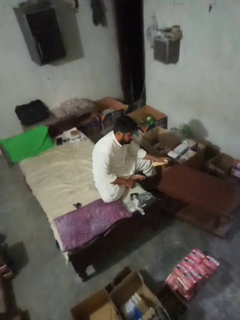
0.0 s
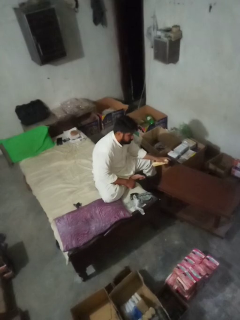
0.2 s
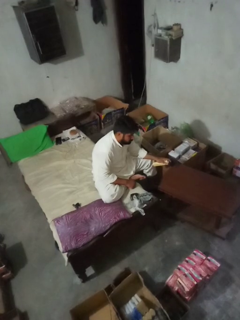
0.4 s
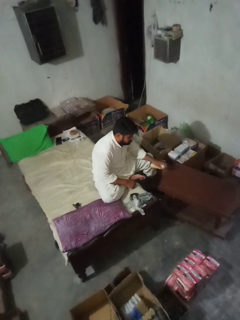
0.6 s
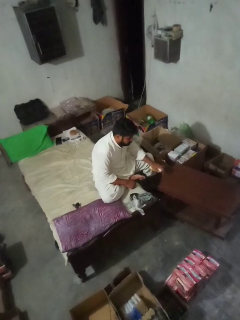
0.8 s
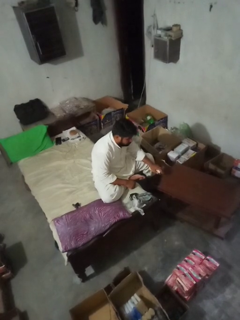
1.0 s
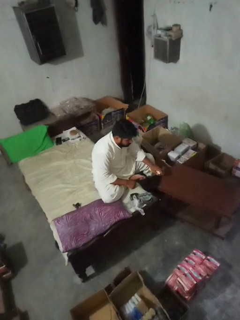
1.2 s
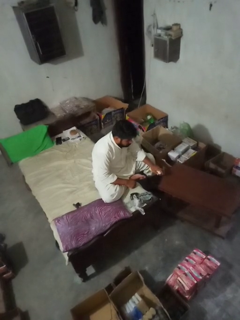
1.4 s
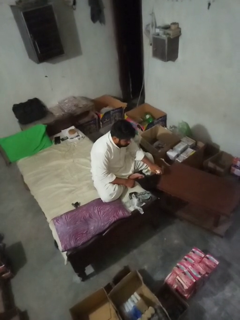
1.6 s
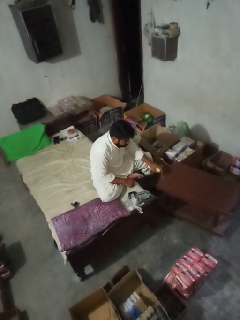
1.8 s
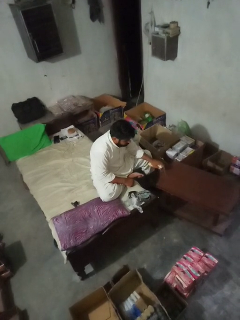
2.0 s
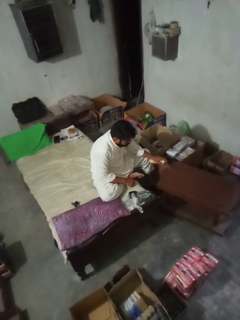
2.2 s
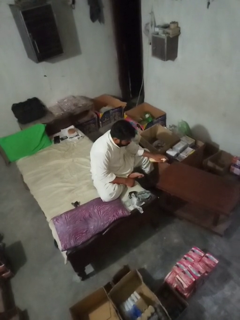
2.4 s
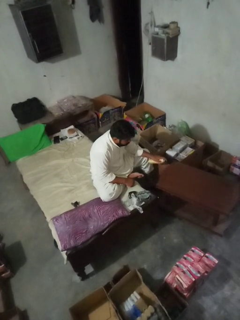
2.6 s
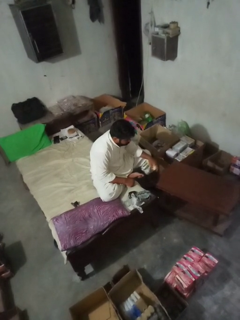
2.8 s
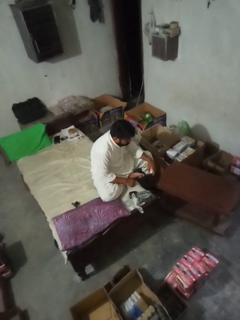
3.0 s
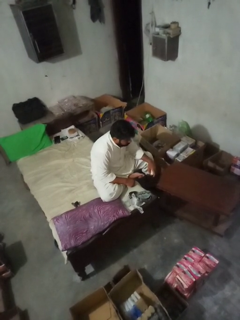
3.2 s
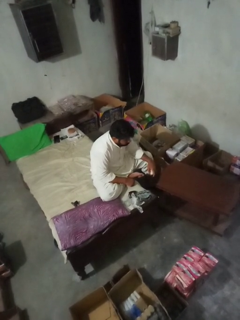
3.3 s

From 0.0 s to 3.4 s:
person sprays from bottle

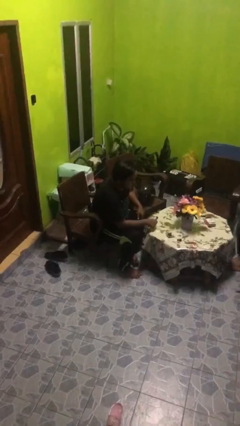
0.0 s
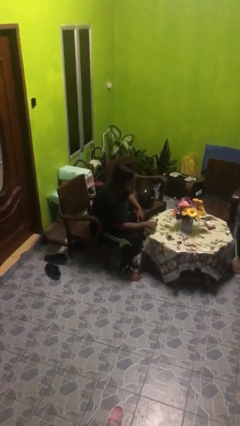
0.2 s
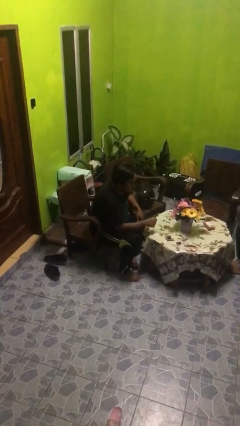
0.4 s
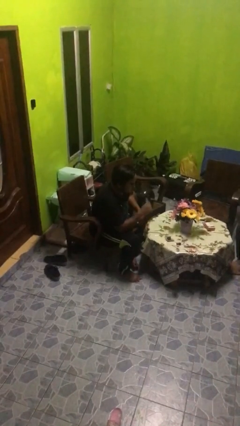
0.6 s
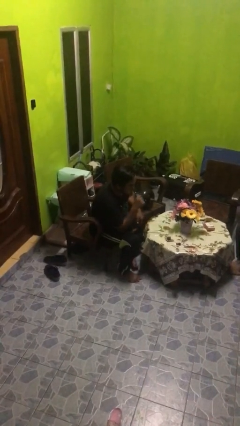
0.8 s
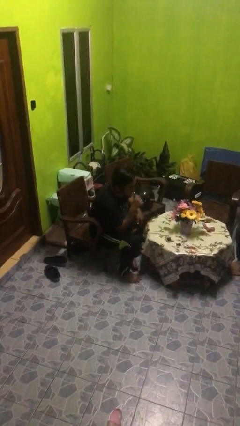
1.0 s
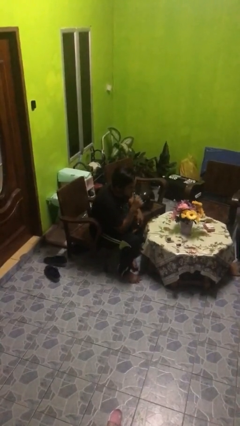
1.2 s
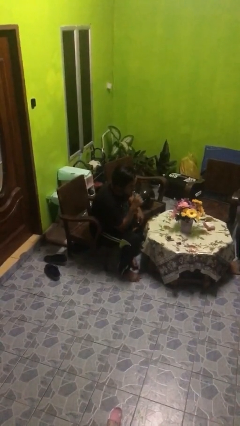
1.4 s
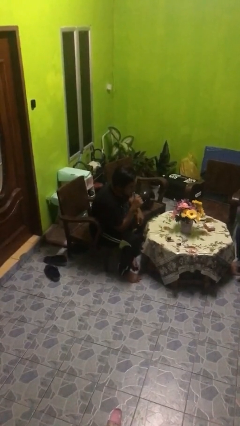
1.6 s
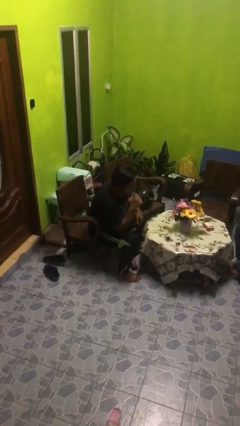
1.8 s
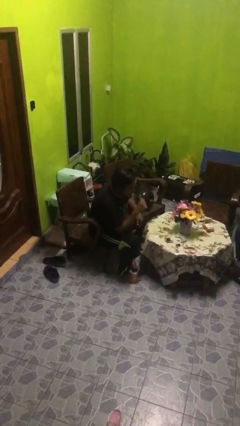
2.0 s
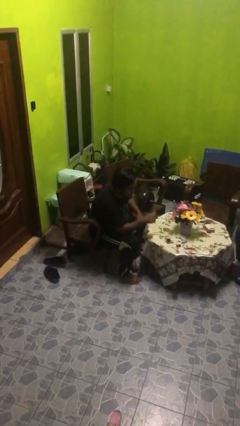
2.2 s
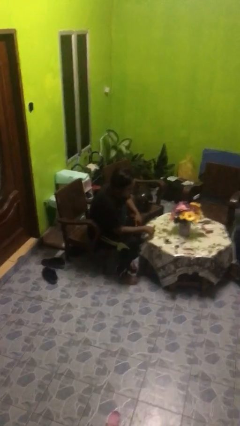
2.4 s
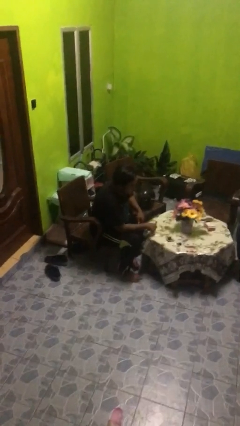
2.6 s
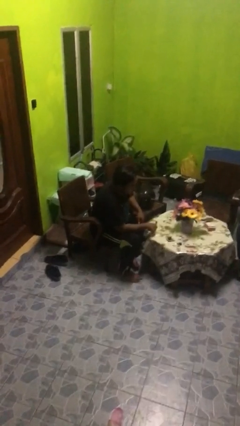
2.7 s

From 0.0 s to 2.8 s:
person vapes

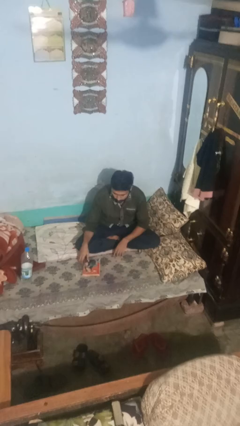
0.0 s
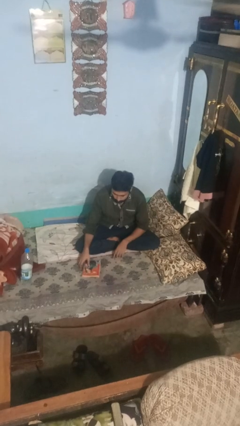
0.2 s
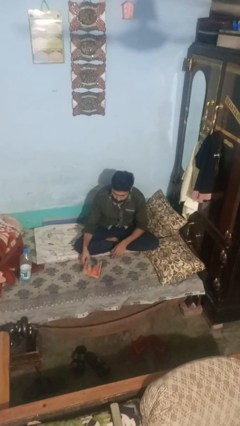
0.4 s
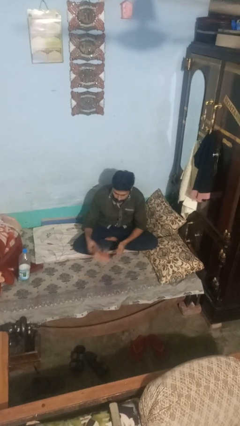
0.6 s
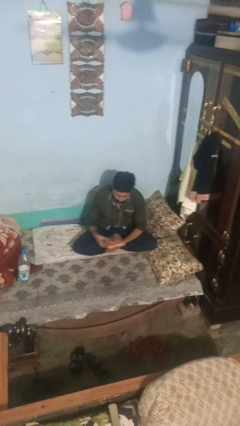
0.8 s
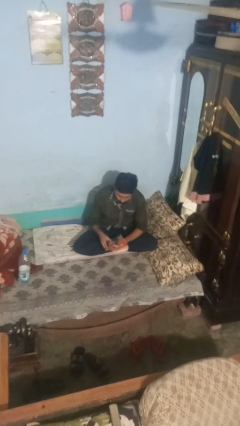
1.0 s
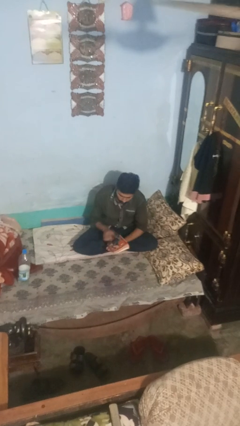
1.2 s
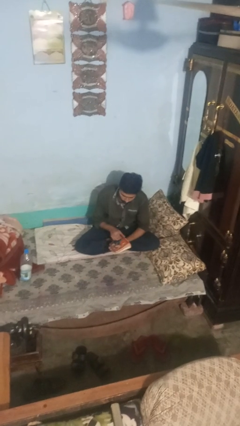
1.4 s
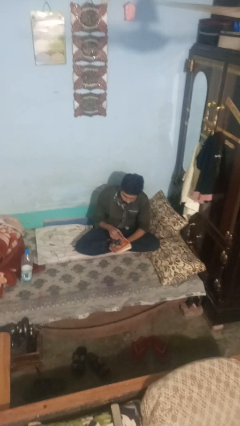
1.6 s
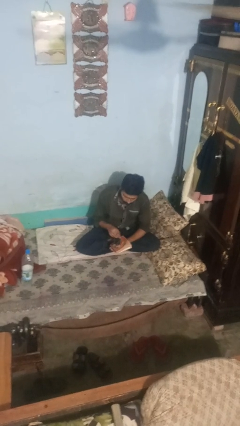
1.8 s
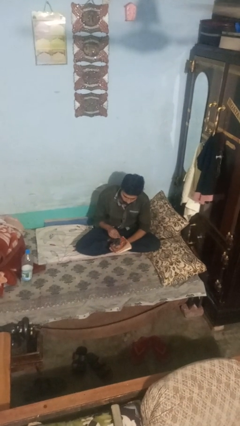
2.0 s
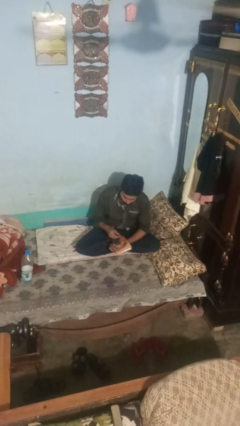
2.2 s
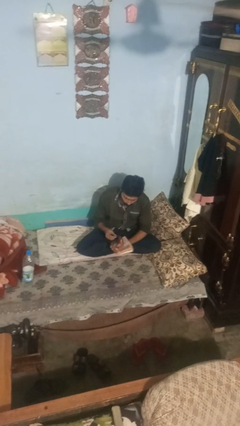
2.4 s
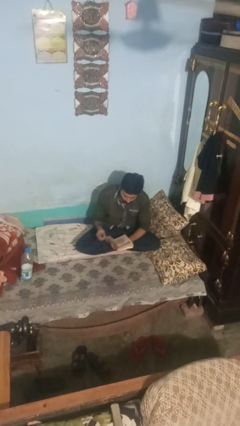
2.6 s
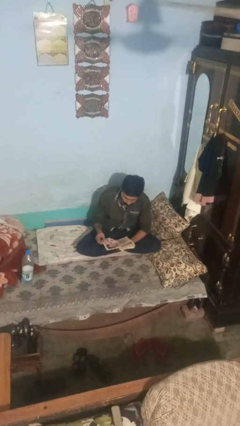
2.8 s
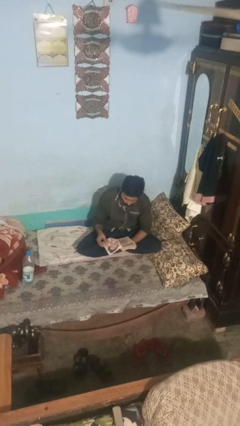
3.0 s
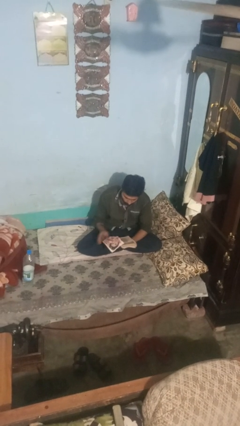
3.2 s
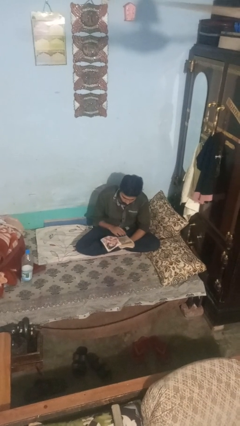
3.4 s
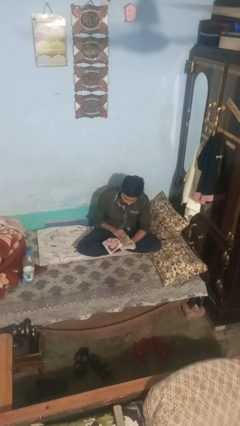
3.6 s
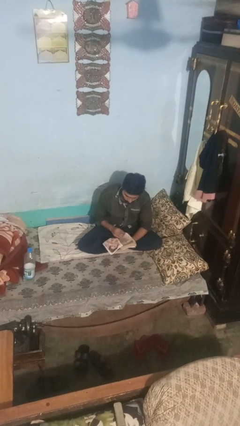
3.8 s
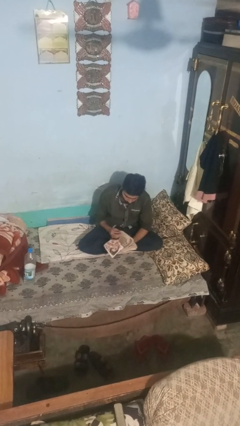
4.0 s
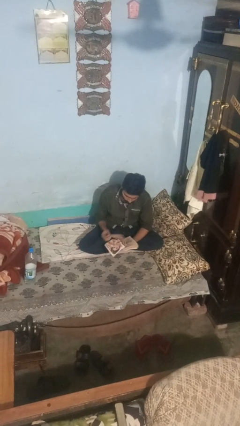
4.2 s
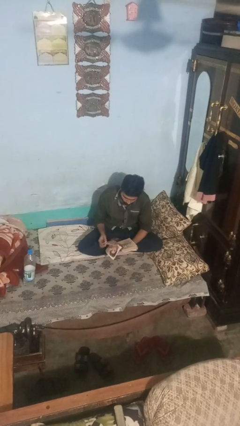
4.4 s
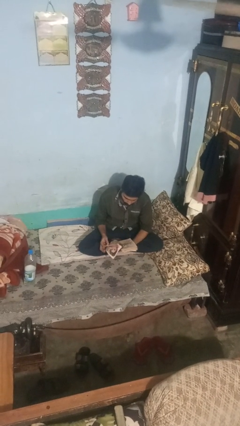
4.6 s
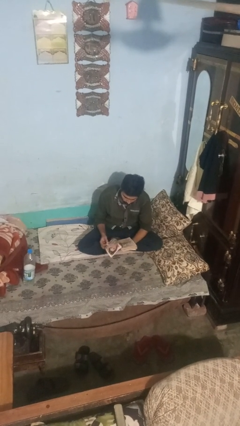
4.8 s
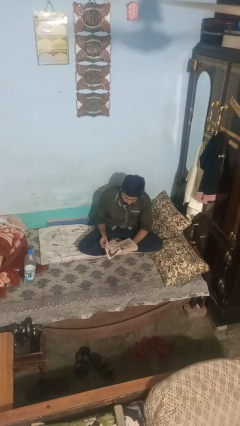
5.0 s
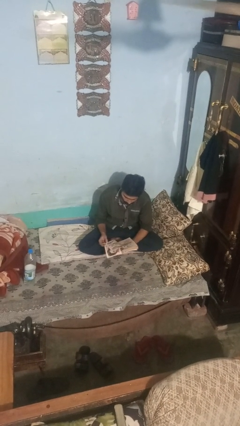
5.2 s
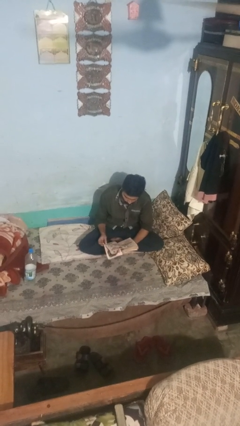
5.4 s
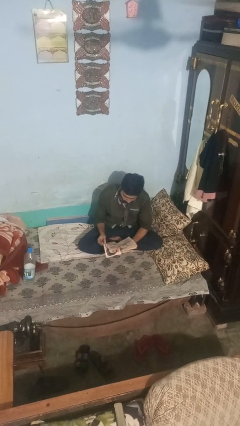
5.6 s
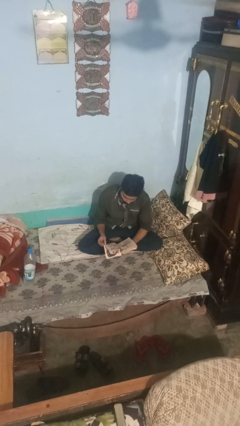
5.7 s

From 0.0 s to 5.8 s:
person reads magazine

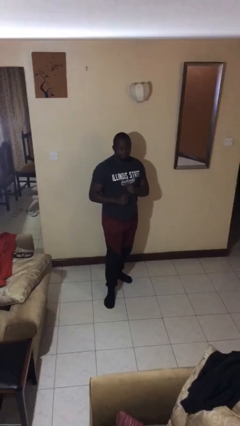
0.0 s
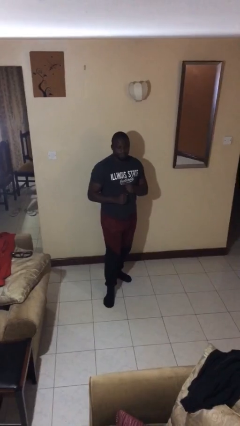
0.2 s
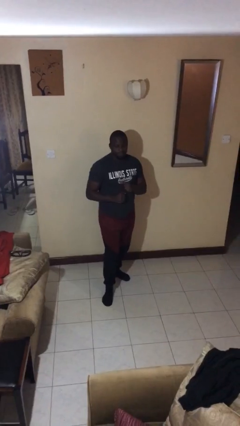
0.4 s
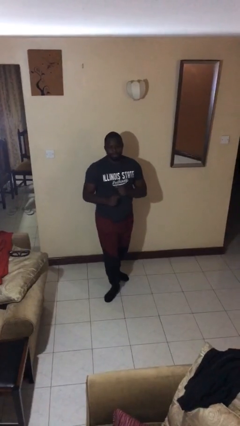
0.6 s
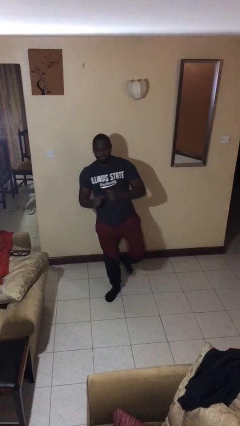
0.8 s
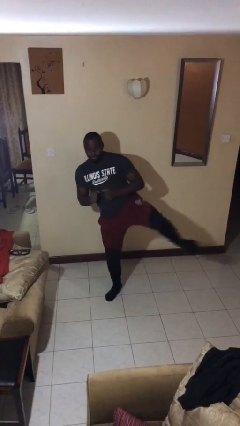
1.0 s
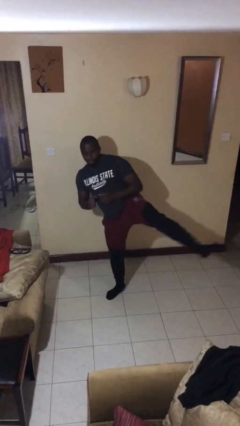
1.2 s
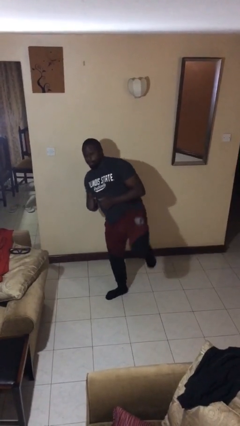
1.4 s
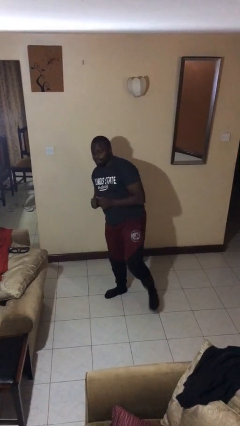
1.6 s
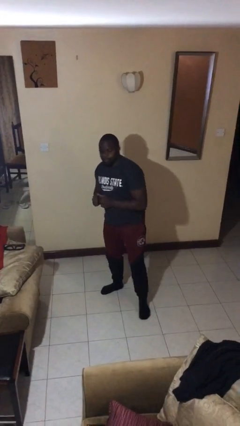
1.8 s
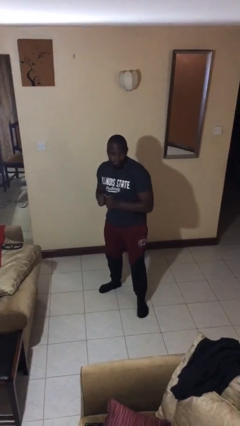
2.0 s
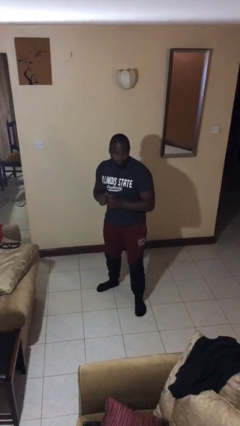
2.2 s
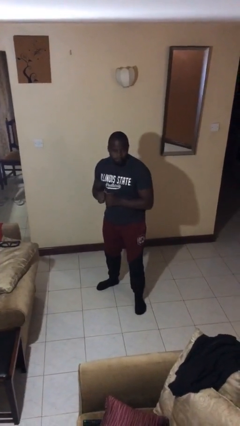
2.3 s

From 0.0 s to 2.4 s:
person karate kicks

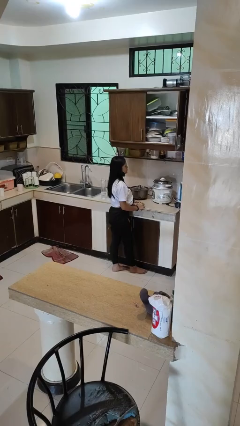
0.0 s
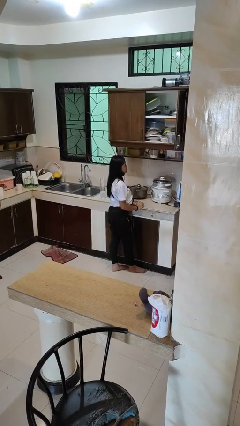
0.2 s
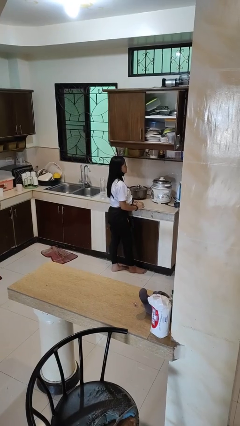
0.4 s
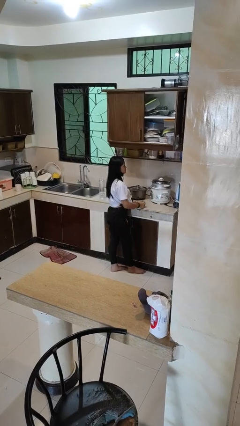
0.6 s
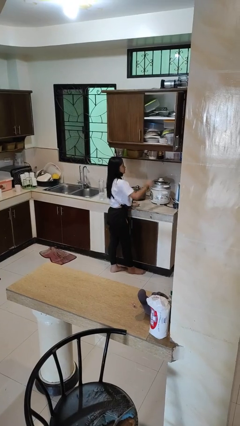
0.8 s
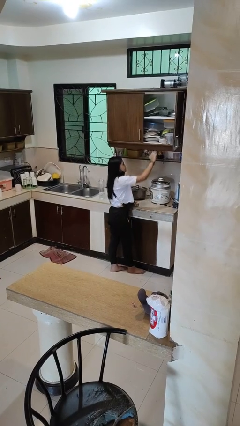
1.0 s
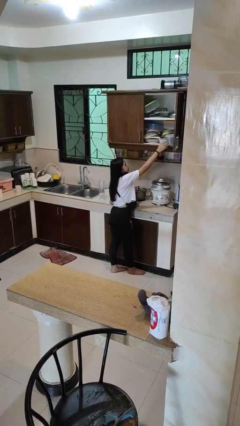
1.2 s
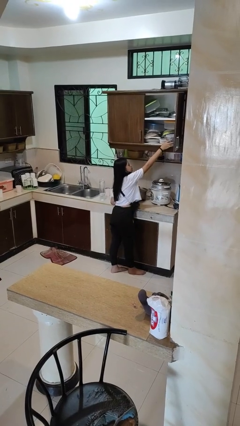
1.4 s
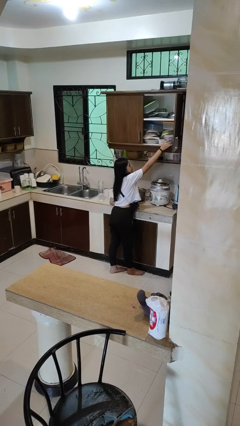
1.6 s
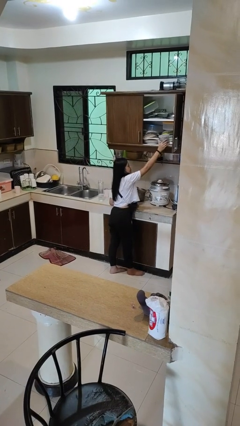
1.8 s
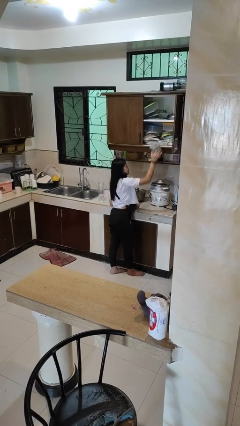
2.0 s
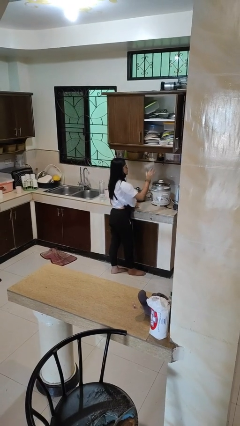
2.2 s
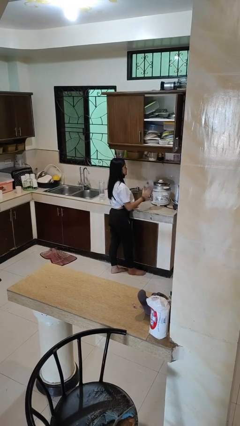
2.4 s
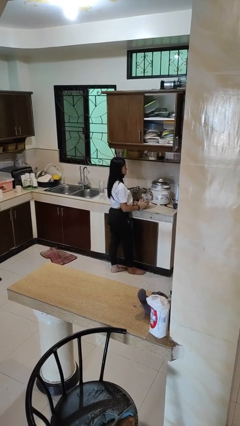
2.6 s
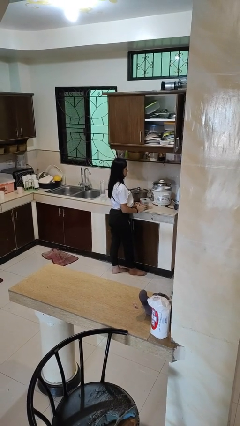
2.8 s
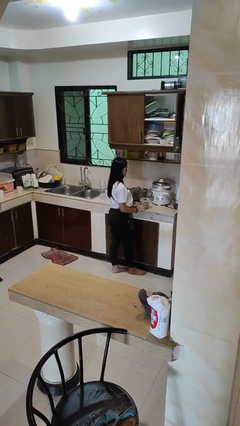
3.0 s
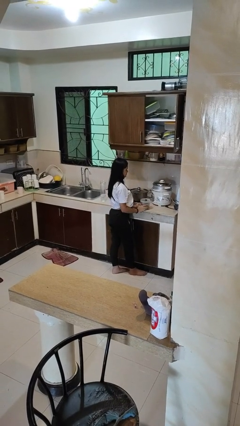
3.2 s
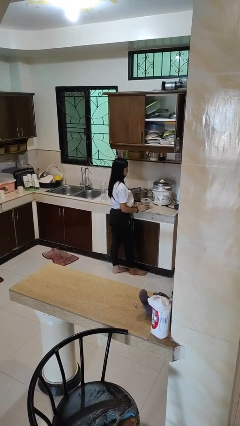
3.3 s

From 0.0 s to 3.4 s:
person picks up object from shelf

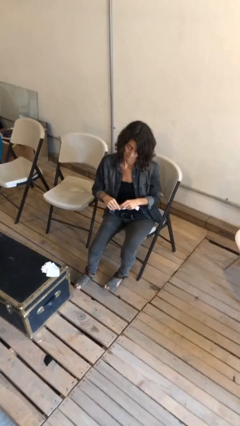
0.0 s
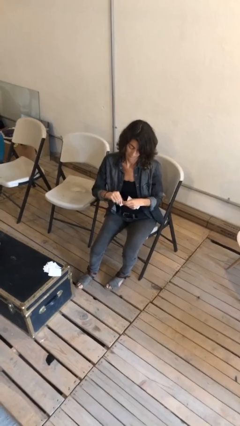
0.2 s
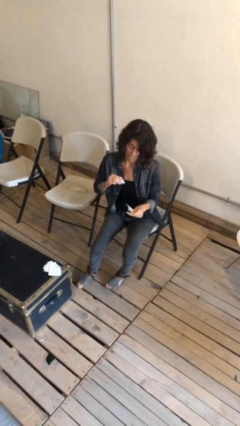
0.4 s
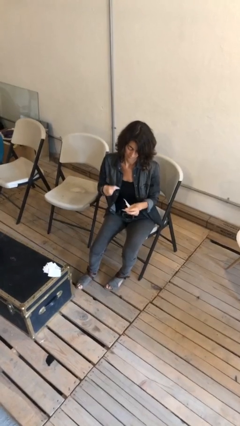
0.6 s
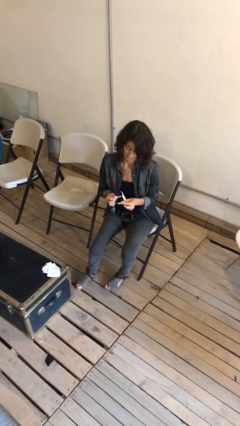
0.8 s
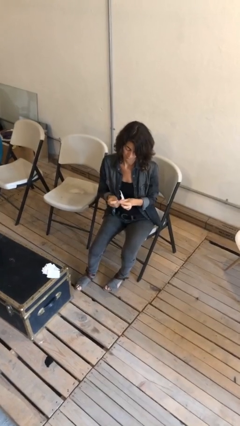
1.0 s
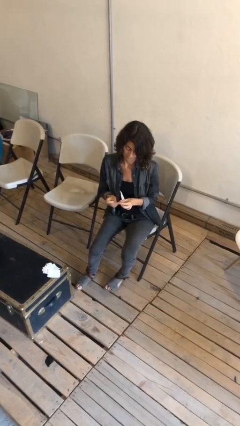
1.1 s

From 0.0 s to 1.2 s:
person tears paper
